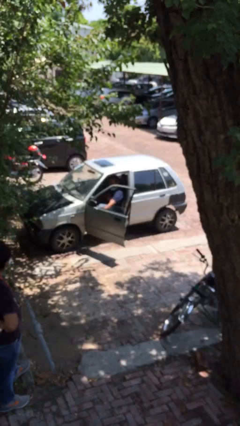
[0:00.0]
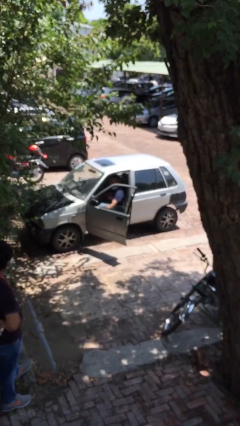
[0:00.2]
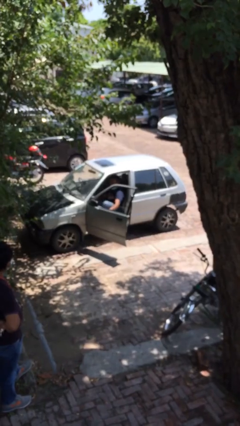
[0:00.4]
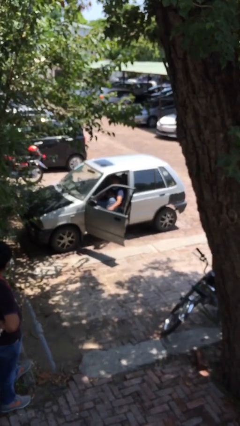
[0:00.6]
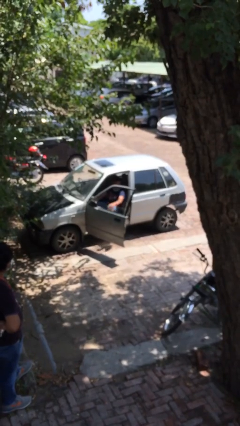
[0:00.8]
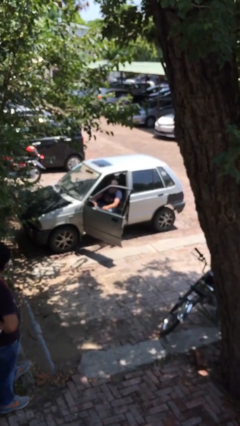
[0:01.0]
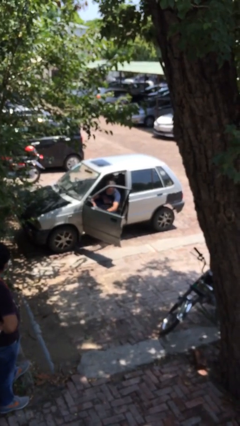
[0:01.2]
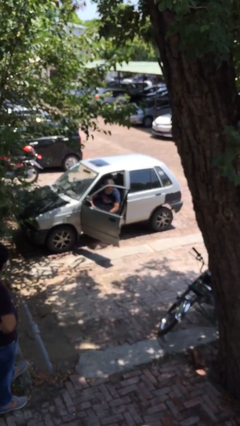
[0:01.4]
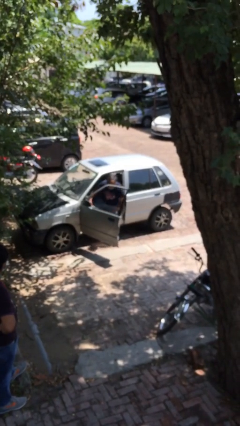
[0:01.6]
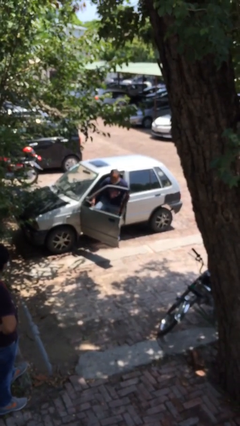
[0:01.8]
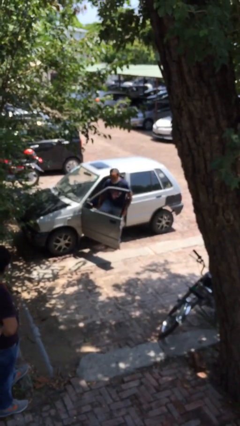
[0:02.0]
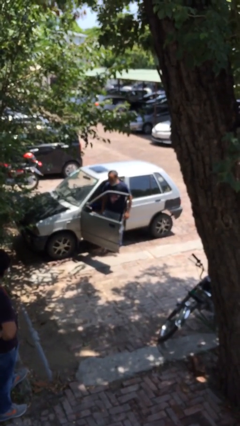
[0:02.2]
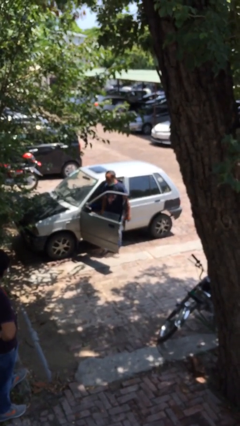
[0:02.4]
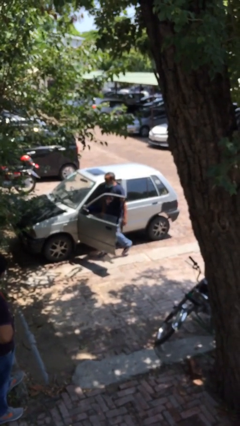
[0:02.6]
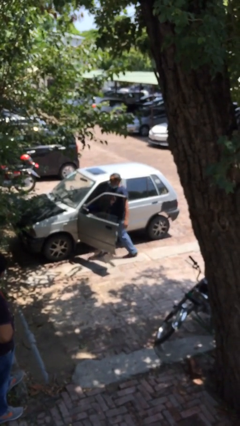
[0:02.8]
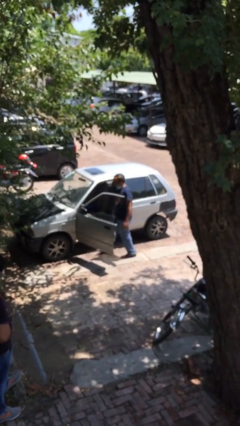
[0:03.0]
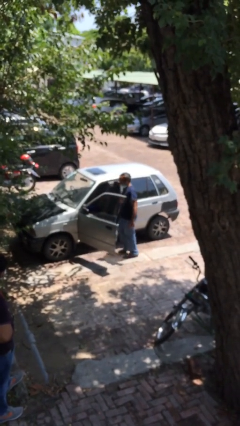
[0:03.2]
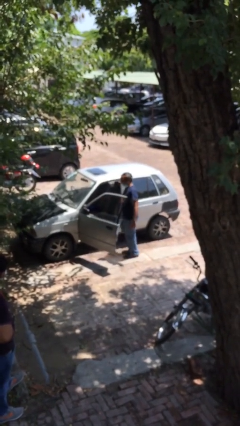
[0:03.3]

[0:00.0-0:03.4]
person exits car

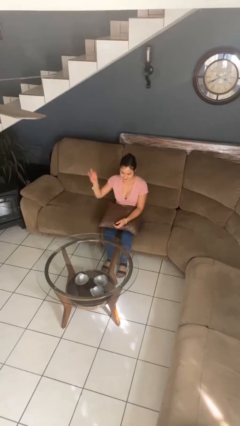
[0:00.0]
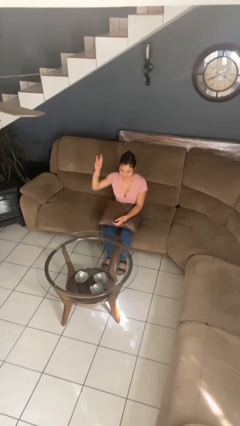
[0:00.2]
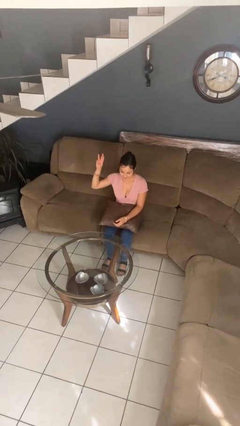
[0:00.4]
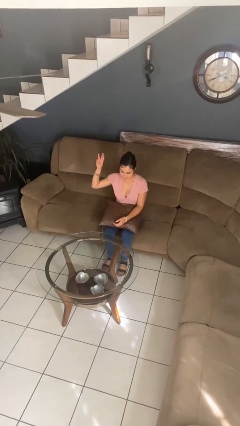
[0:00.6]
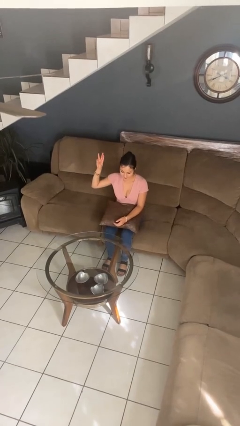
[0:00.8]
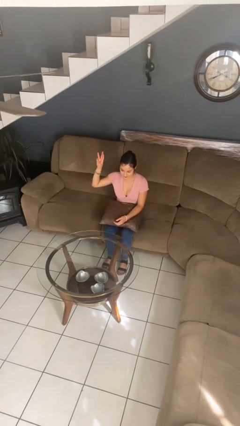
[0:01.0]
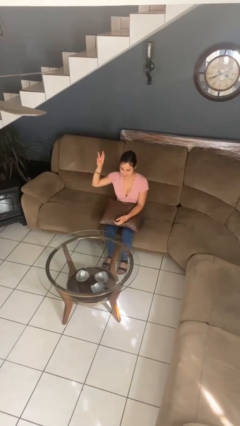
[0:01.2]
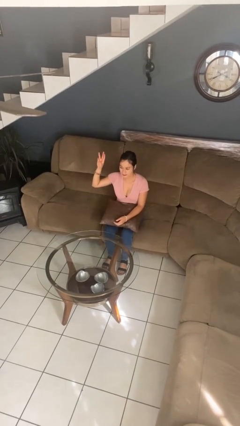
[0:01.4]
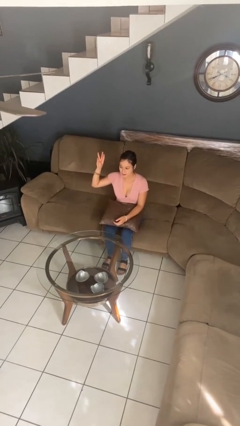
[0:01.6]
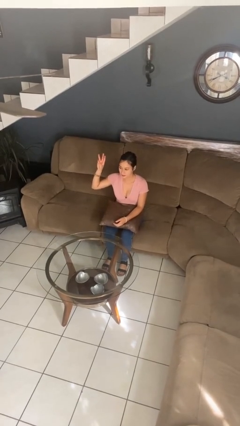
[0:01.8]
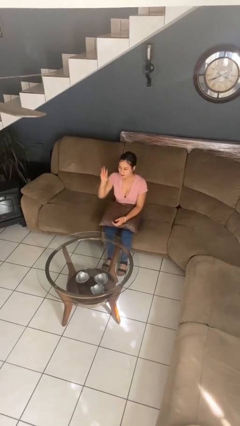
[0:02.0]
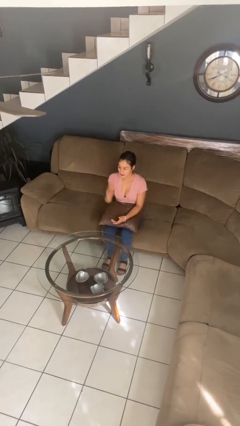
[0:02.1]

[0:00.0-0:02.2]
person gestures number three

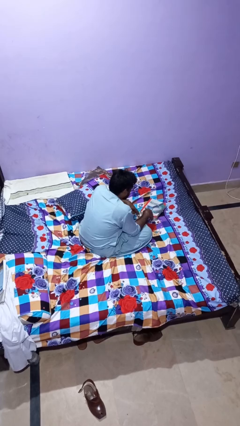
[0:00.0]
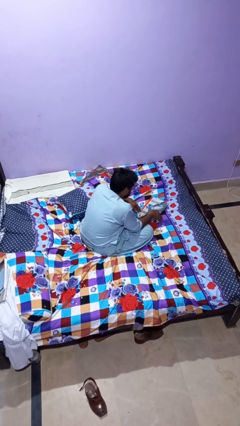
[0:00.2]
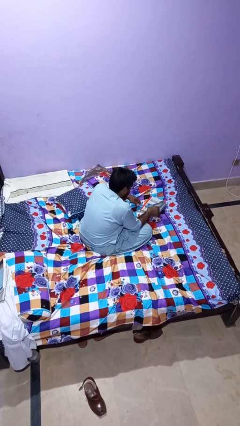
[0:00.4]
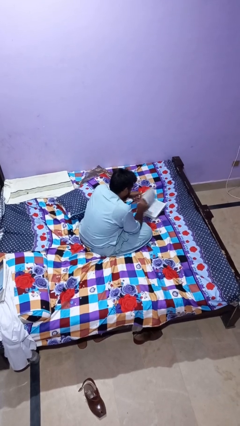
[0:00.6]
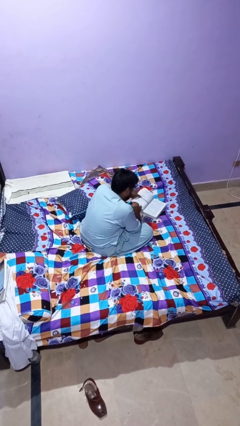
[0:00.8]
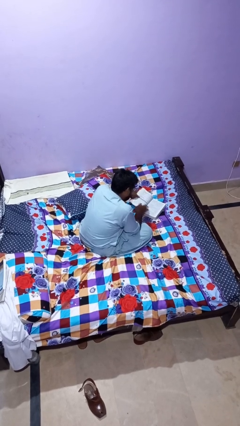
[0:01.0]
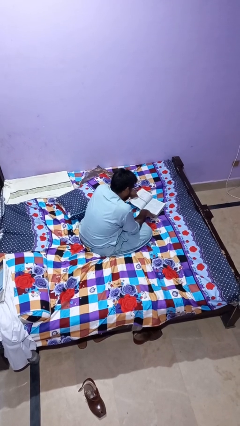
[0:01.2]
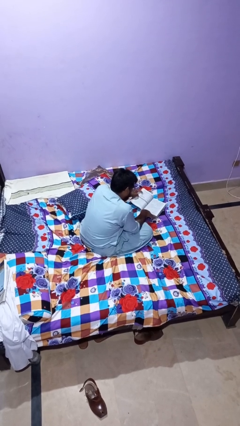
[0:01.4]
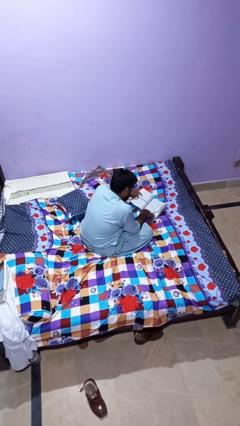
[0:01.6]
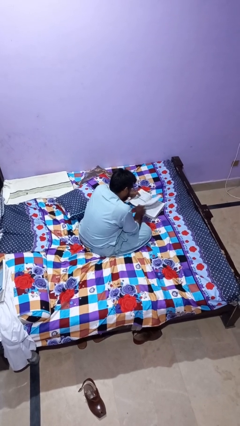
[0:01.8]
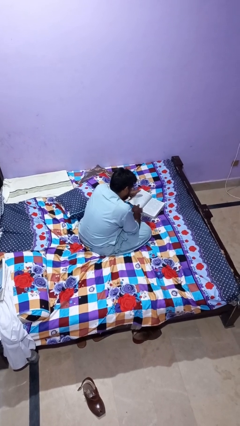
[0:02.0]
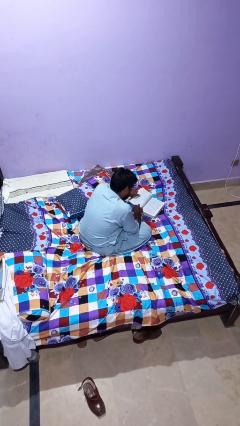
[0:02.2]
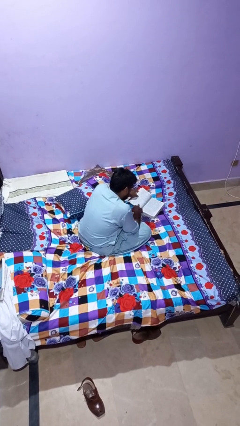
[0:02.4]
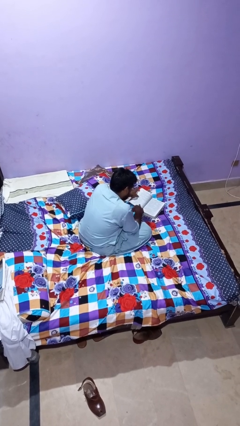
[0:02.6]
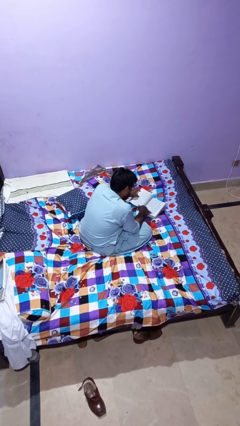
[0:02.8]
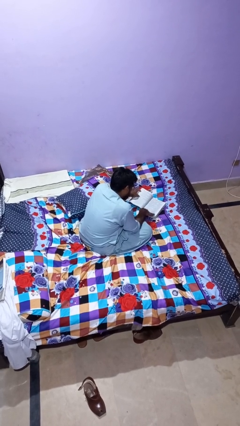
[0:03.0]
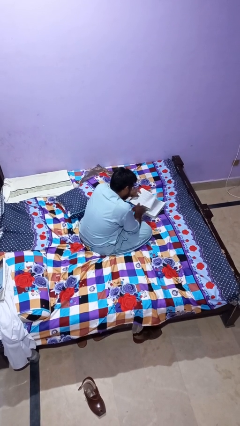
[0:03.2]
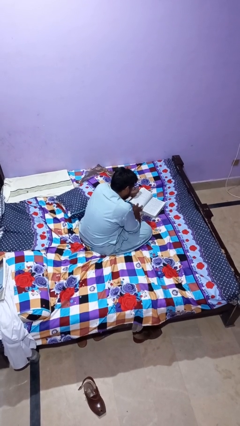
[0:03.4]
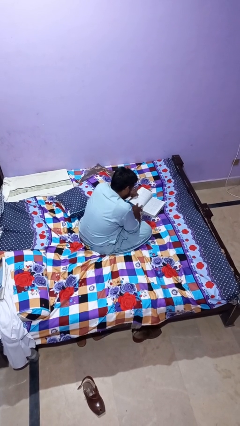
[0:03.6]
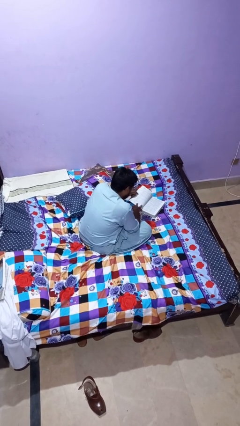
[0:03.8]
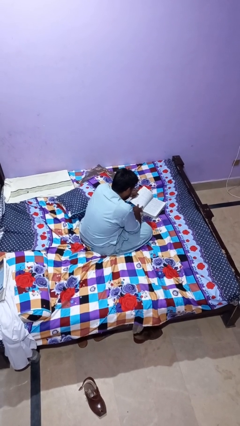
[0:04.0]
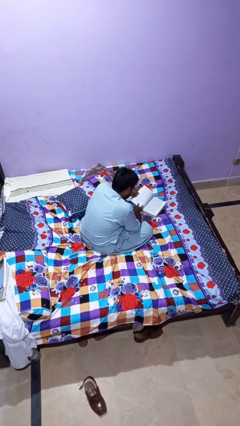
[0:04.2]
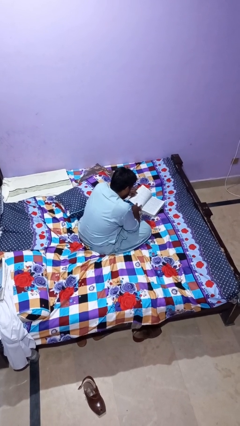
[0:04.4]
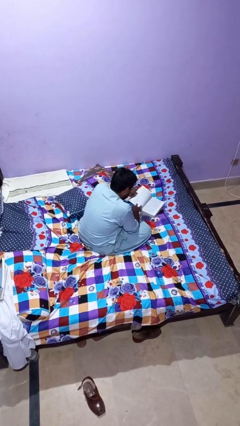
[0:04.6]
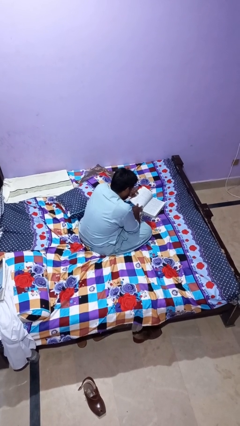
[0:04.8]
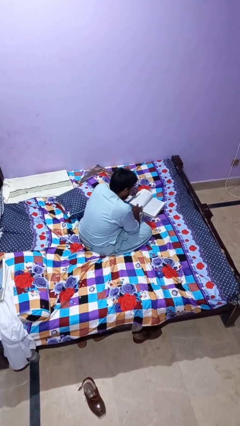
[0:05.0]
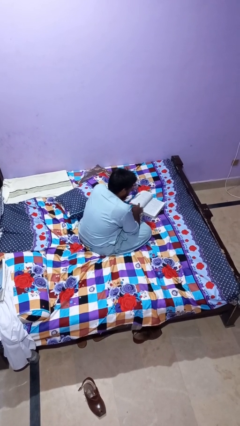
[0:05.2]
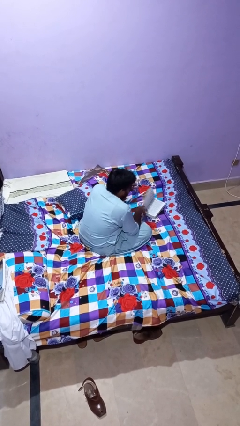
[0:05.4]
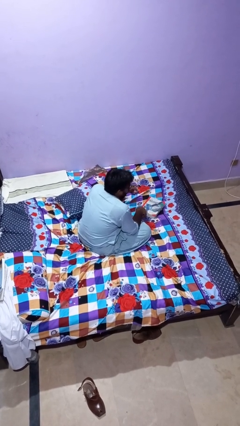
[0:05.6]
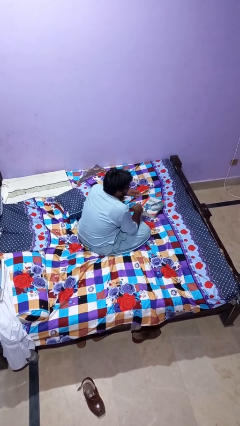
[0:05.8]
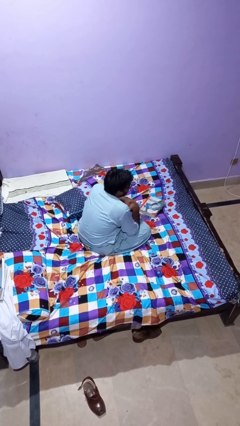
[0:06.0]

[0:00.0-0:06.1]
person reads book

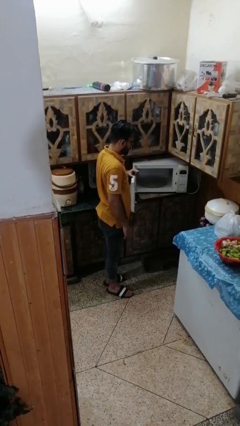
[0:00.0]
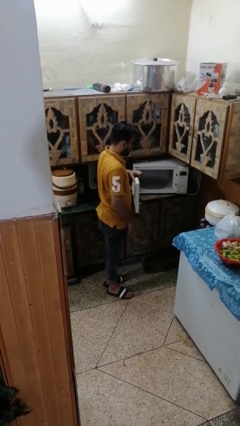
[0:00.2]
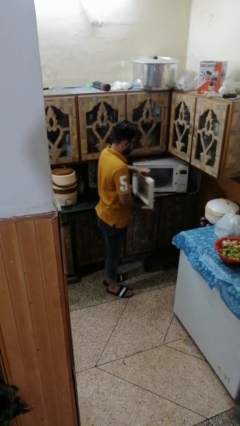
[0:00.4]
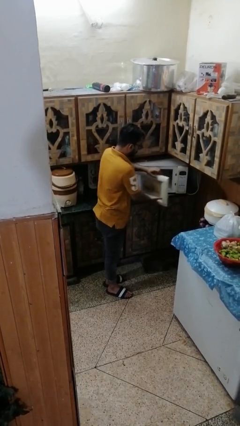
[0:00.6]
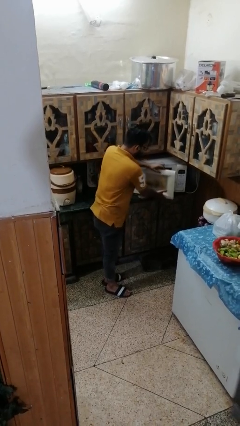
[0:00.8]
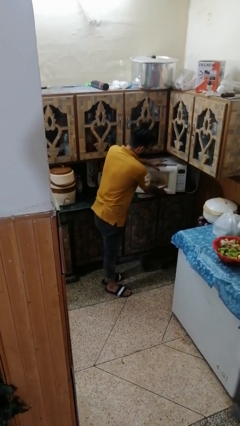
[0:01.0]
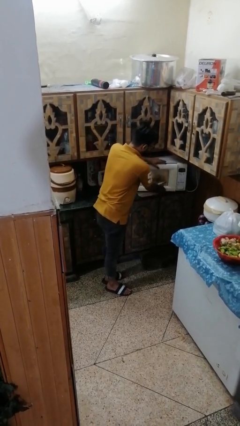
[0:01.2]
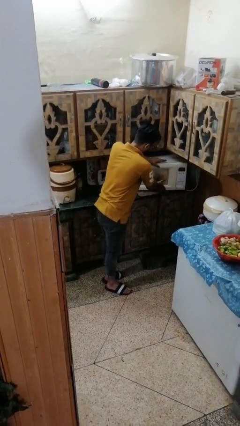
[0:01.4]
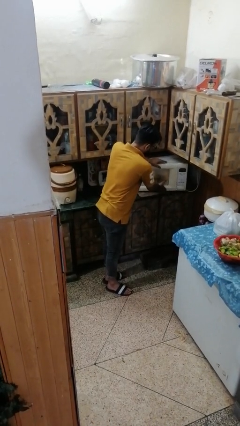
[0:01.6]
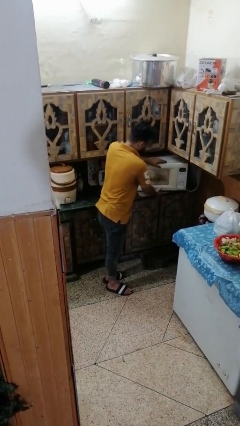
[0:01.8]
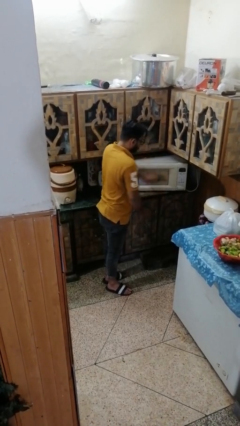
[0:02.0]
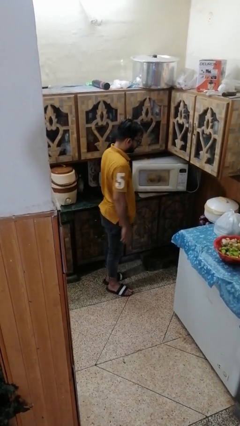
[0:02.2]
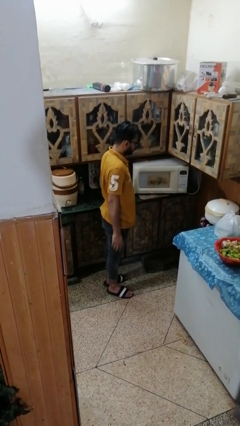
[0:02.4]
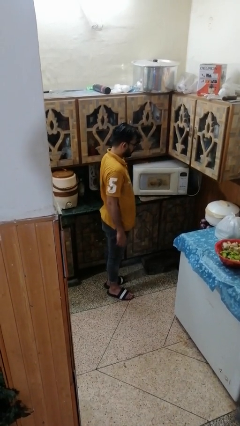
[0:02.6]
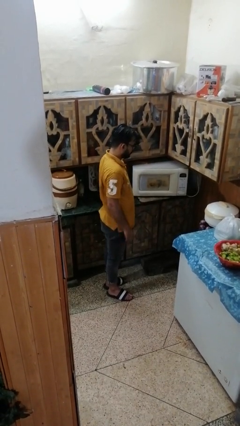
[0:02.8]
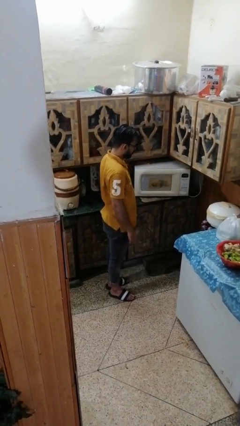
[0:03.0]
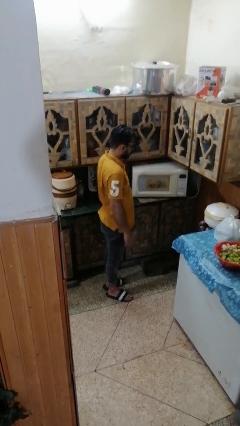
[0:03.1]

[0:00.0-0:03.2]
person closes microwave

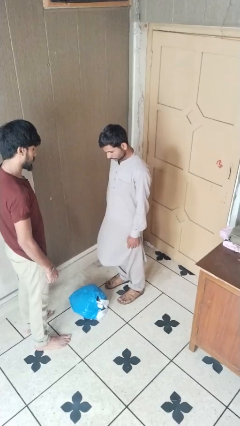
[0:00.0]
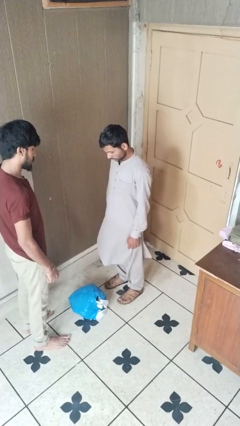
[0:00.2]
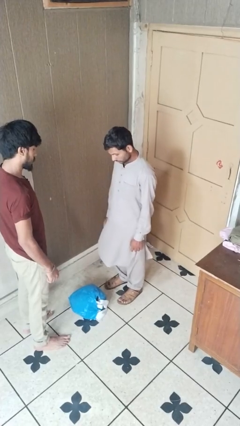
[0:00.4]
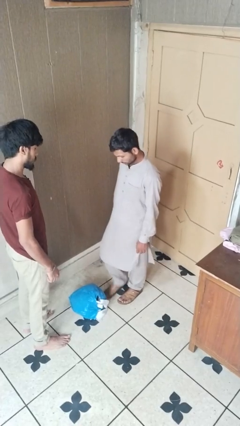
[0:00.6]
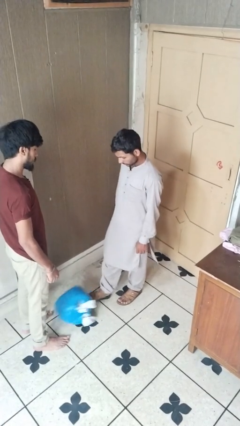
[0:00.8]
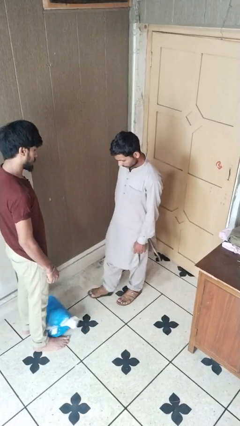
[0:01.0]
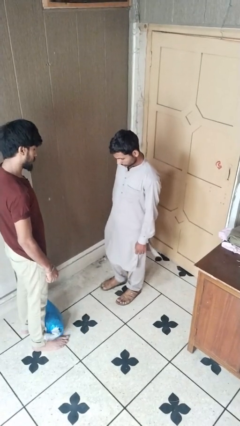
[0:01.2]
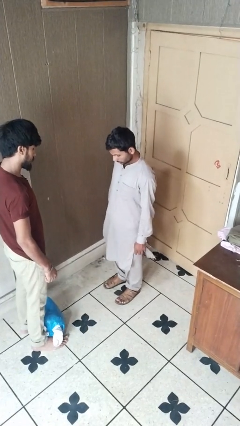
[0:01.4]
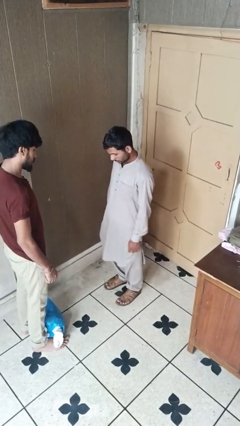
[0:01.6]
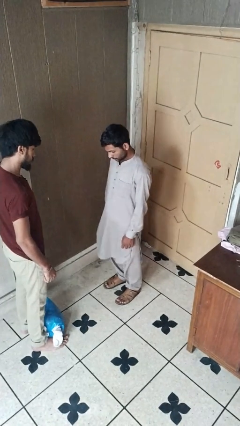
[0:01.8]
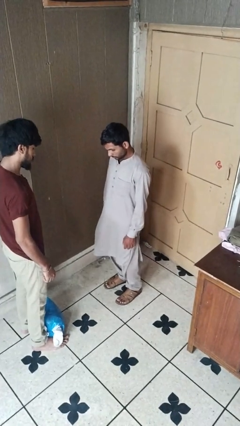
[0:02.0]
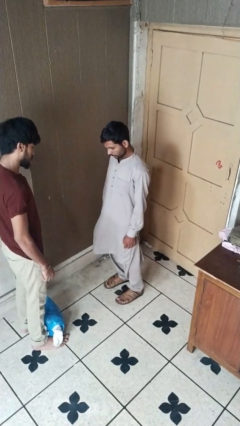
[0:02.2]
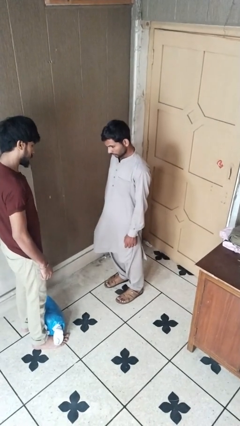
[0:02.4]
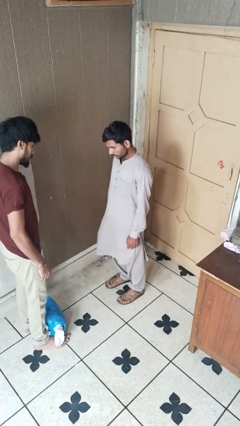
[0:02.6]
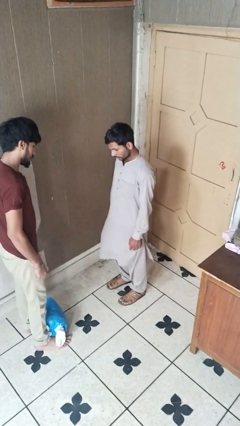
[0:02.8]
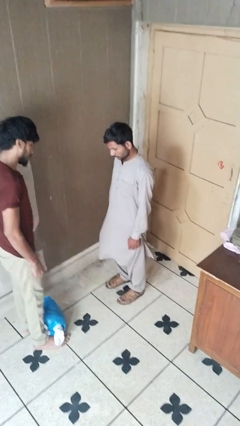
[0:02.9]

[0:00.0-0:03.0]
person kicks object to person
